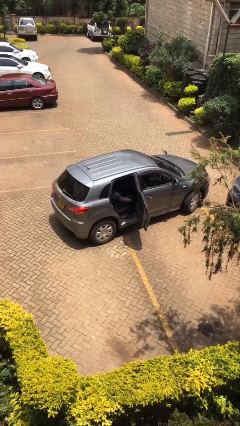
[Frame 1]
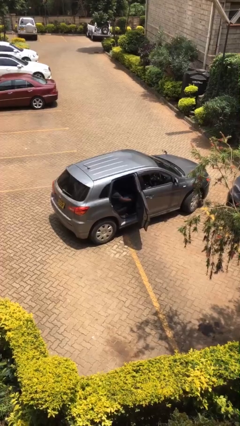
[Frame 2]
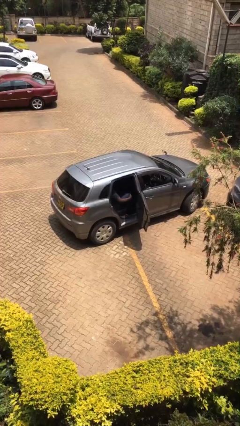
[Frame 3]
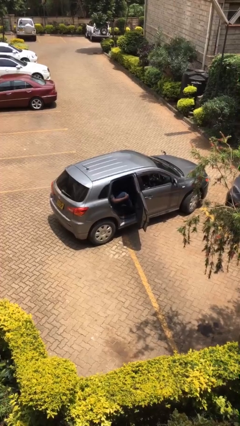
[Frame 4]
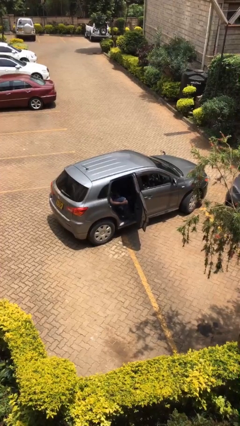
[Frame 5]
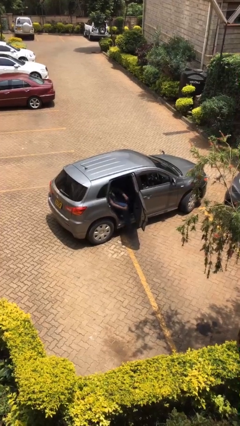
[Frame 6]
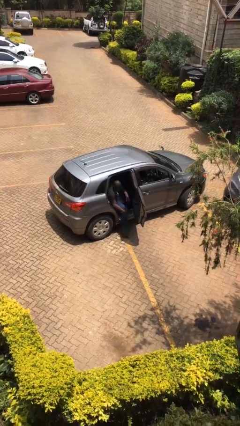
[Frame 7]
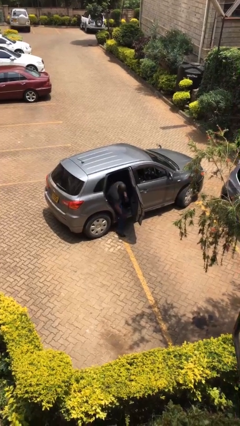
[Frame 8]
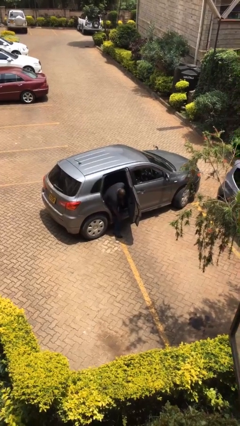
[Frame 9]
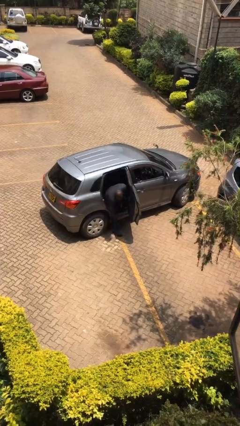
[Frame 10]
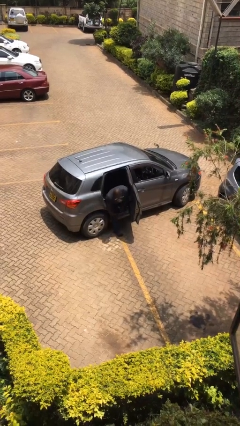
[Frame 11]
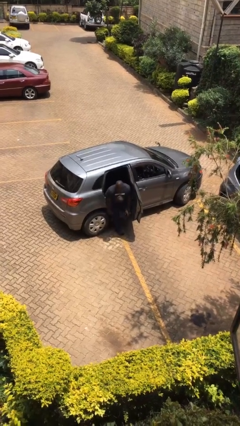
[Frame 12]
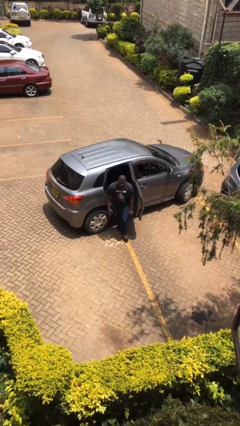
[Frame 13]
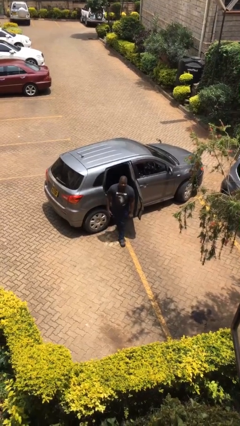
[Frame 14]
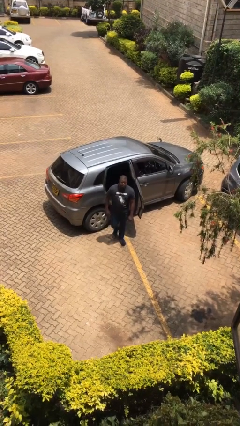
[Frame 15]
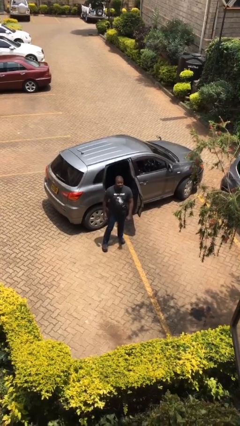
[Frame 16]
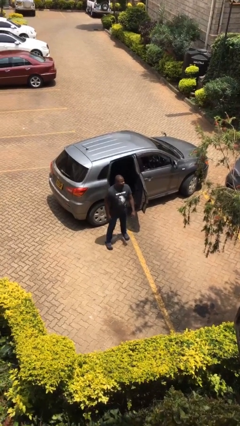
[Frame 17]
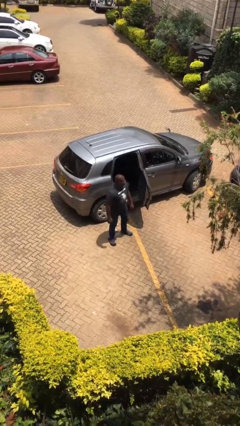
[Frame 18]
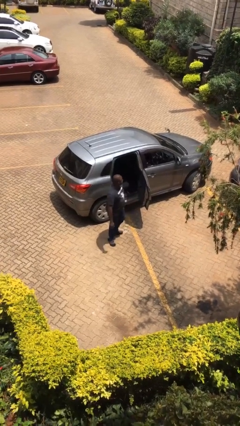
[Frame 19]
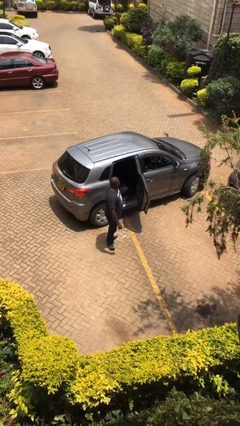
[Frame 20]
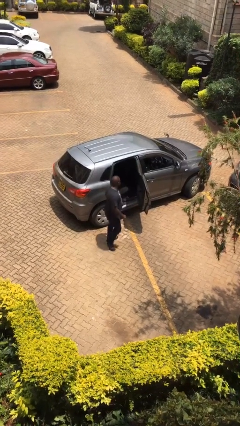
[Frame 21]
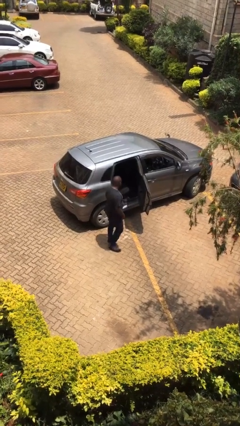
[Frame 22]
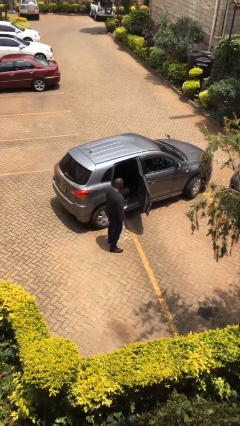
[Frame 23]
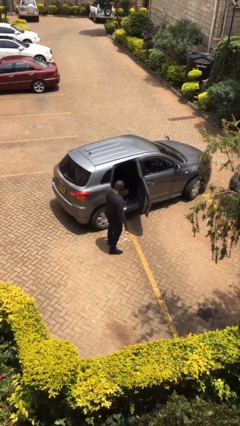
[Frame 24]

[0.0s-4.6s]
person exits car

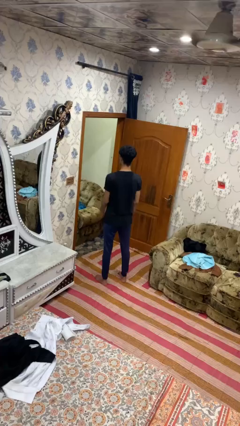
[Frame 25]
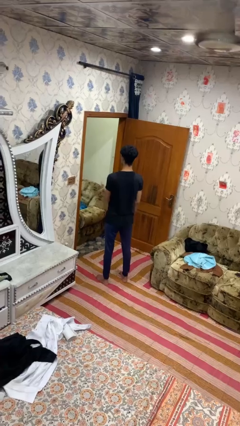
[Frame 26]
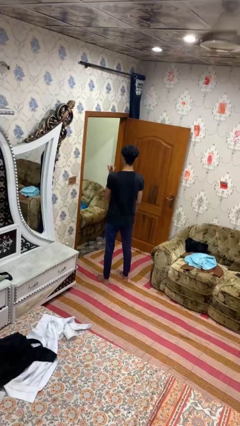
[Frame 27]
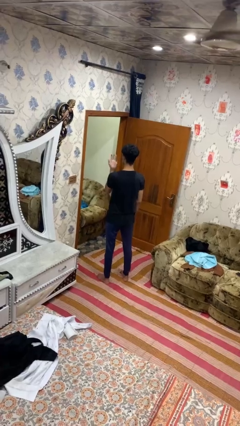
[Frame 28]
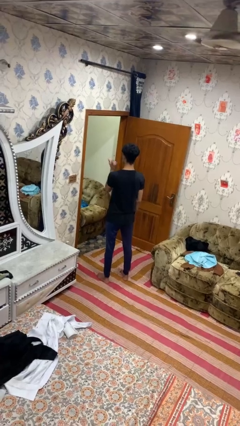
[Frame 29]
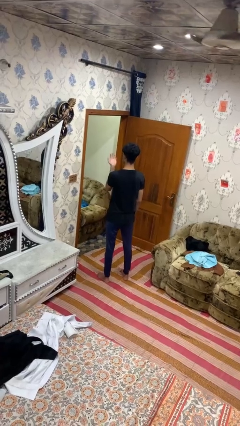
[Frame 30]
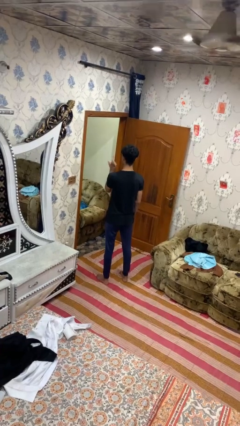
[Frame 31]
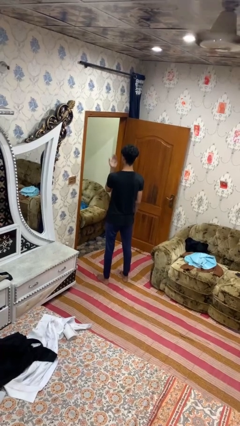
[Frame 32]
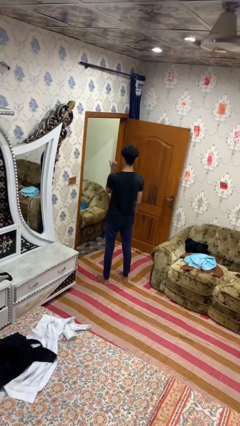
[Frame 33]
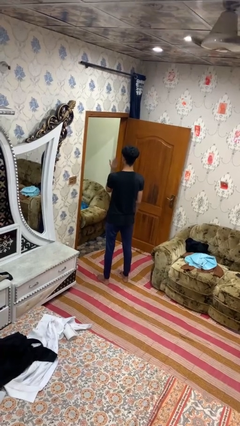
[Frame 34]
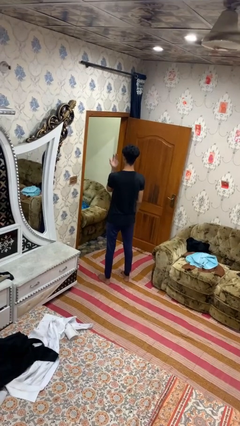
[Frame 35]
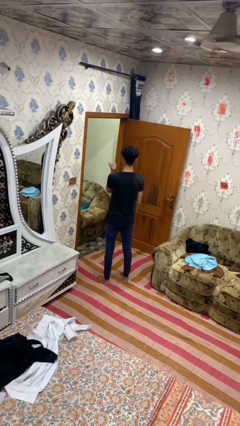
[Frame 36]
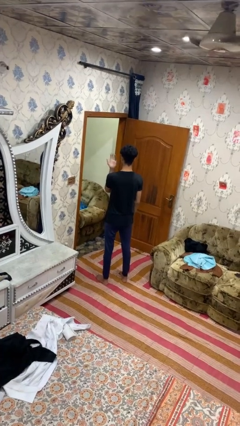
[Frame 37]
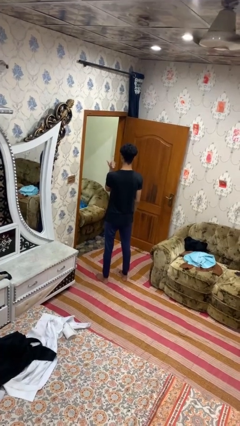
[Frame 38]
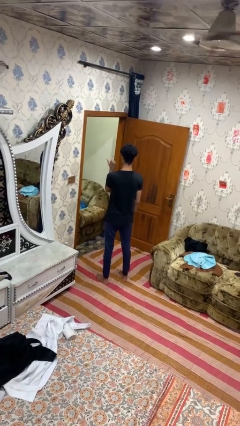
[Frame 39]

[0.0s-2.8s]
person gestures listen closely

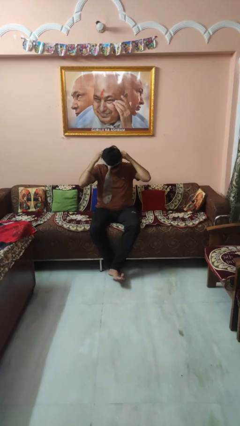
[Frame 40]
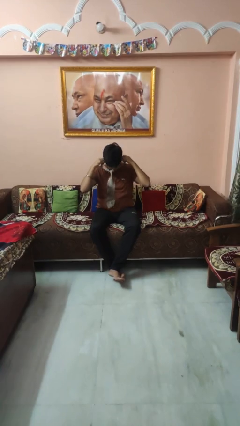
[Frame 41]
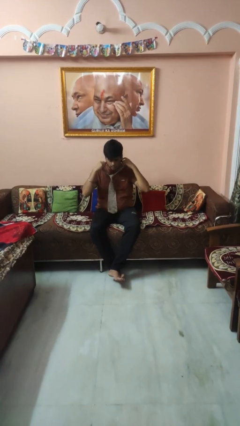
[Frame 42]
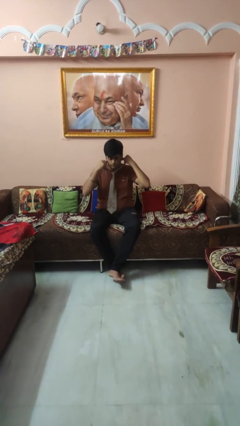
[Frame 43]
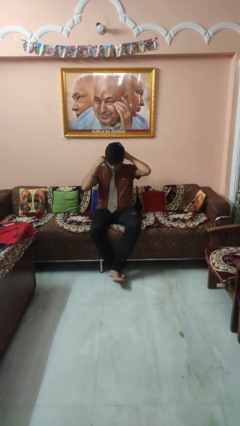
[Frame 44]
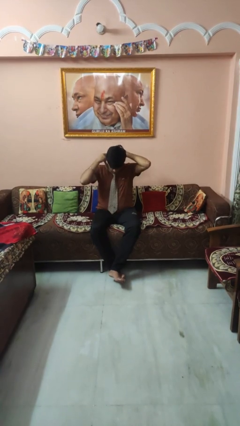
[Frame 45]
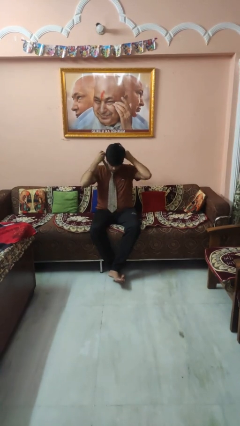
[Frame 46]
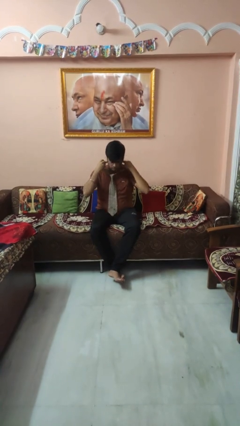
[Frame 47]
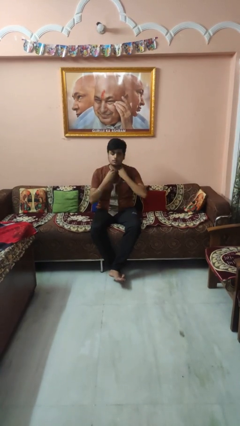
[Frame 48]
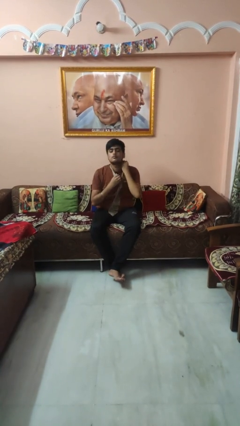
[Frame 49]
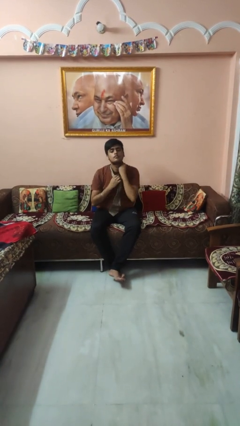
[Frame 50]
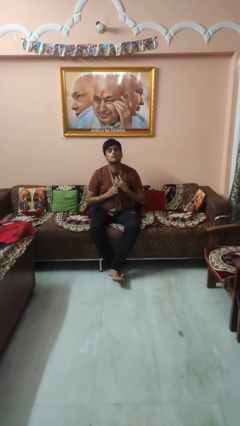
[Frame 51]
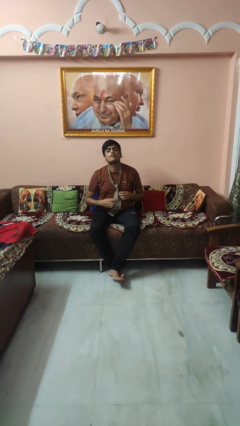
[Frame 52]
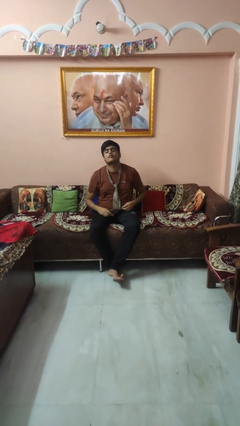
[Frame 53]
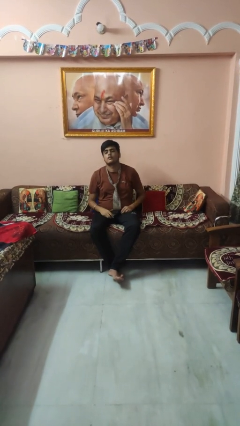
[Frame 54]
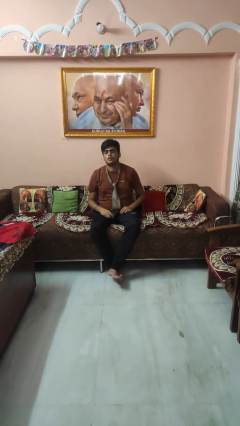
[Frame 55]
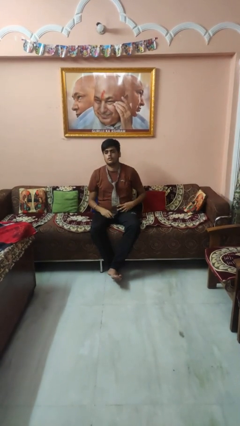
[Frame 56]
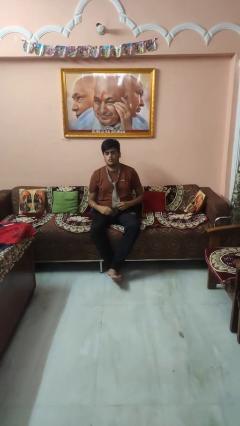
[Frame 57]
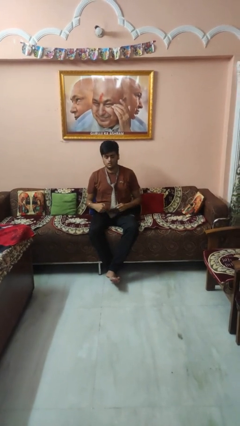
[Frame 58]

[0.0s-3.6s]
person puts on necktie

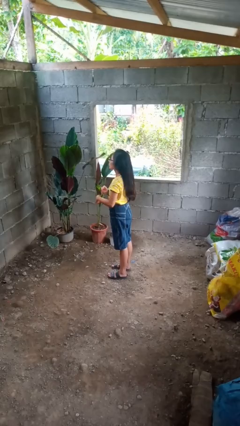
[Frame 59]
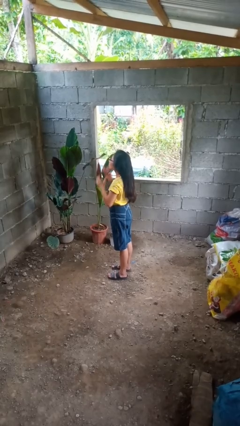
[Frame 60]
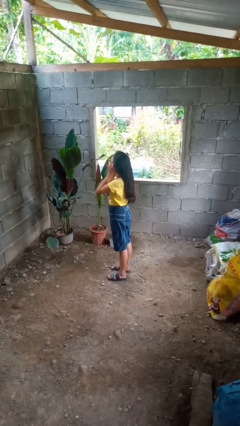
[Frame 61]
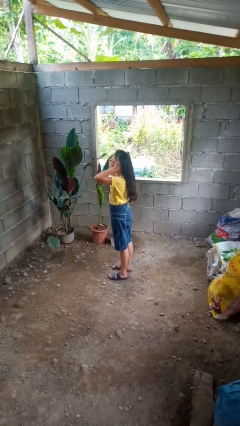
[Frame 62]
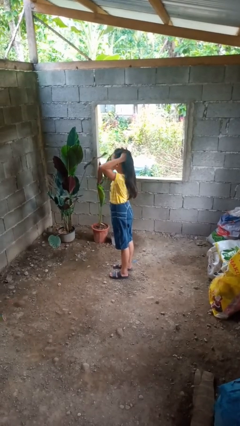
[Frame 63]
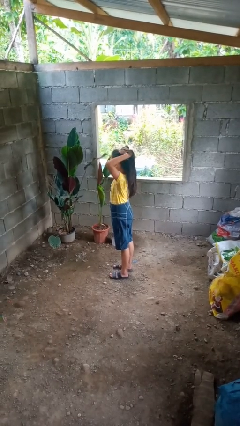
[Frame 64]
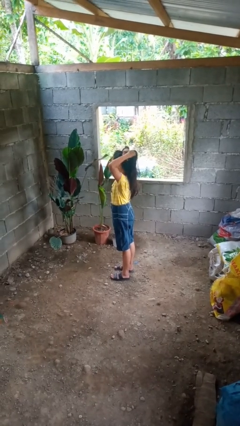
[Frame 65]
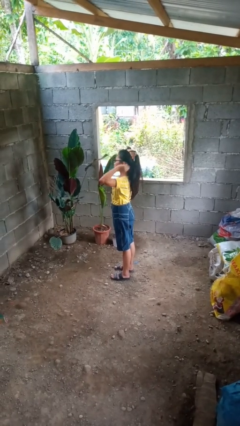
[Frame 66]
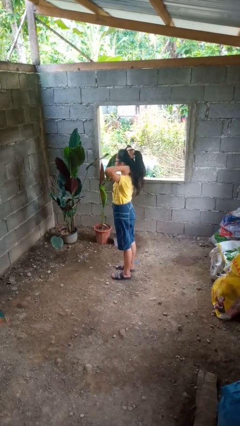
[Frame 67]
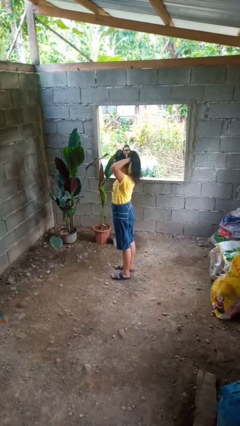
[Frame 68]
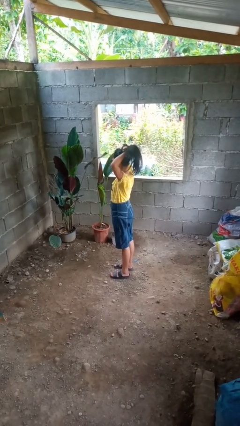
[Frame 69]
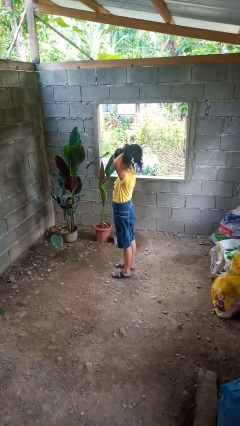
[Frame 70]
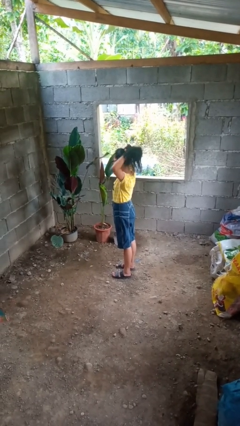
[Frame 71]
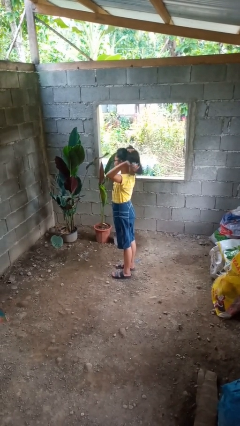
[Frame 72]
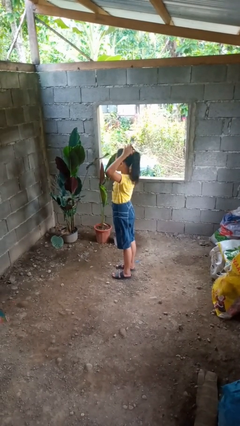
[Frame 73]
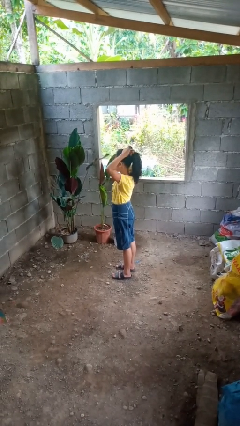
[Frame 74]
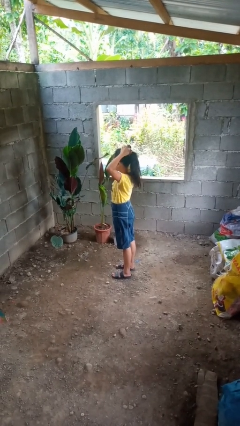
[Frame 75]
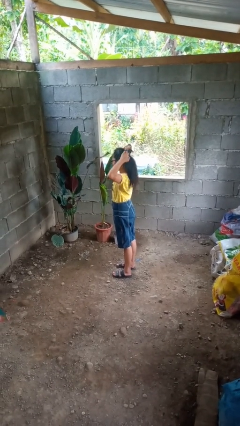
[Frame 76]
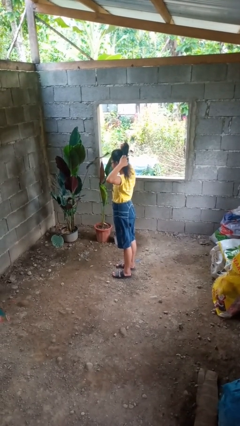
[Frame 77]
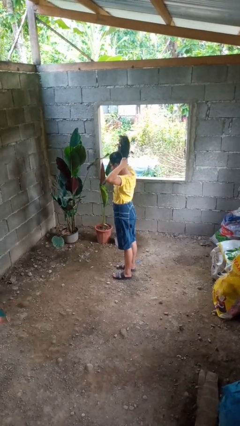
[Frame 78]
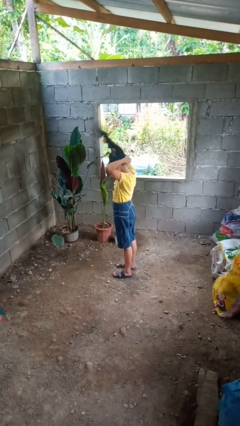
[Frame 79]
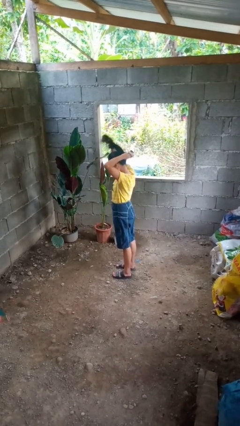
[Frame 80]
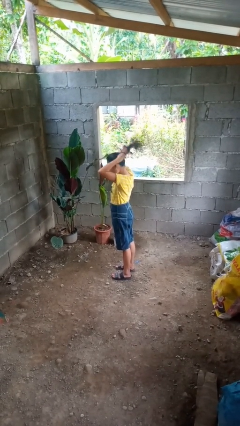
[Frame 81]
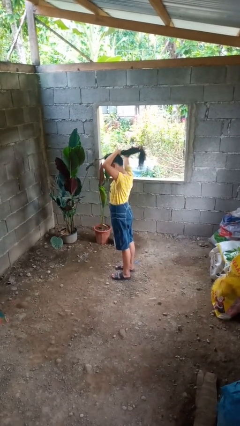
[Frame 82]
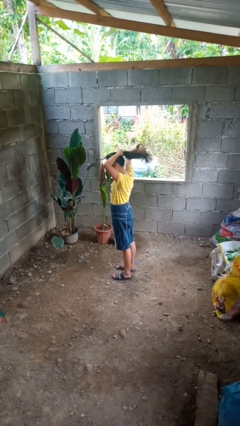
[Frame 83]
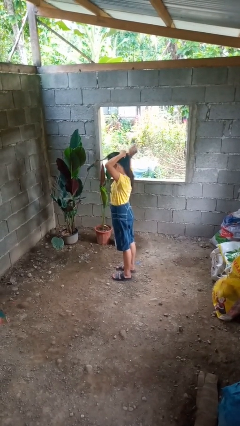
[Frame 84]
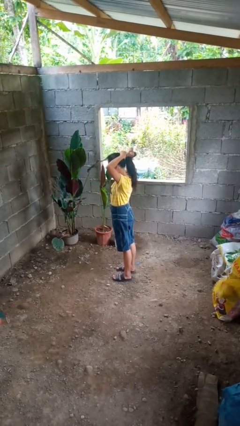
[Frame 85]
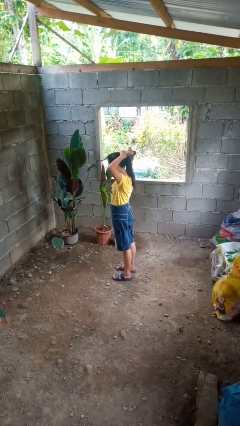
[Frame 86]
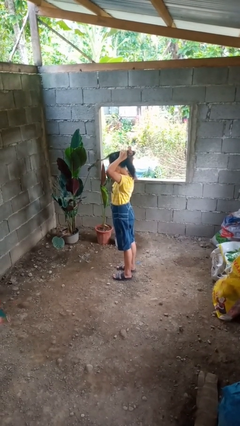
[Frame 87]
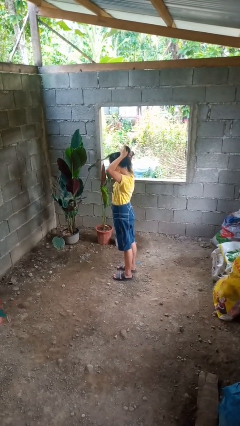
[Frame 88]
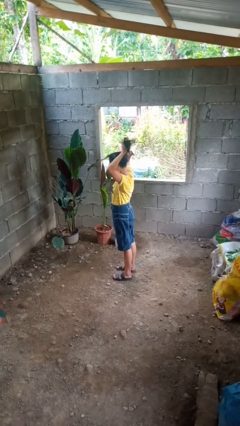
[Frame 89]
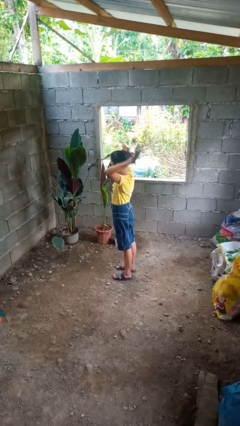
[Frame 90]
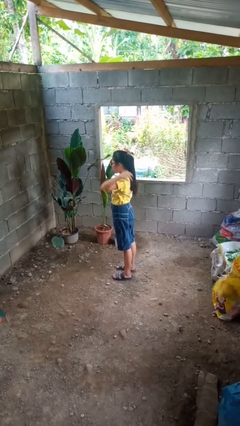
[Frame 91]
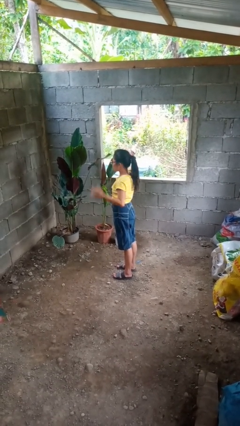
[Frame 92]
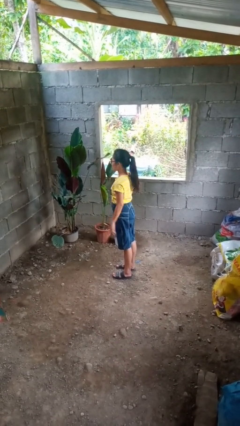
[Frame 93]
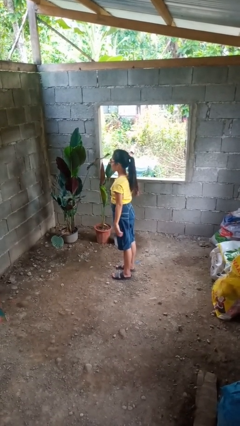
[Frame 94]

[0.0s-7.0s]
person puts hair in ponytail
